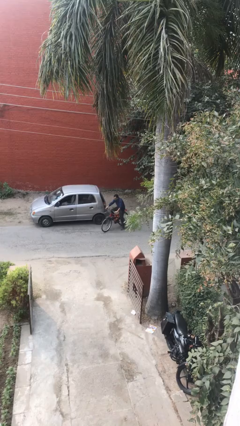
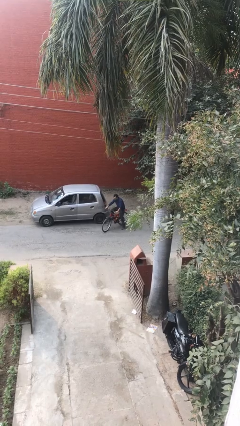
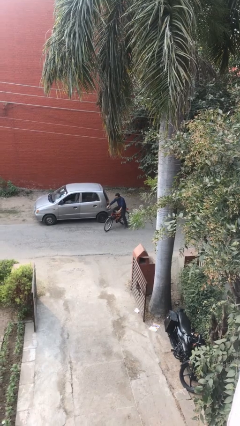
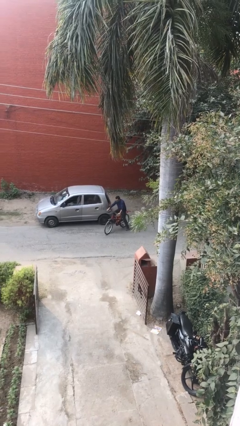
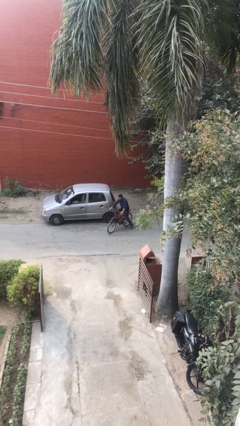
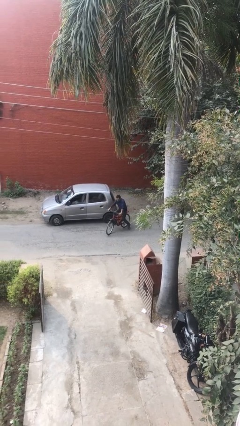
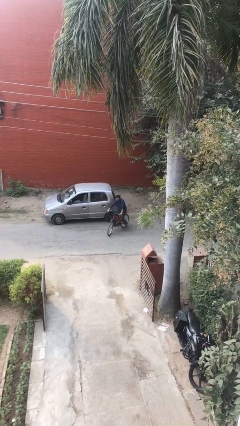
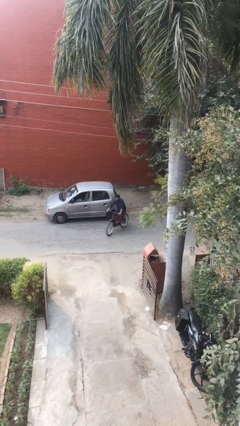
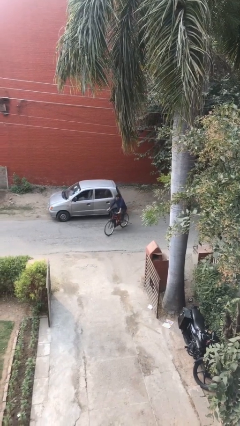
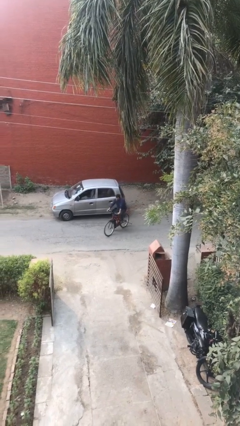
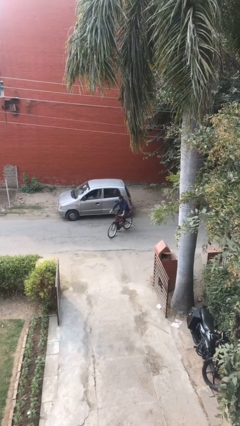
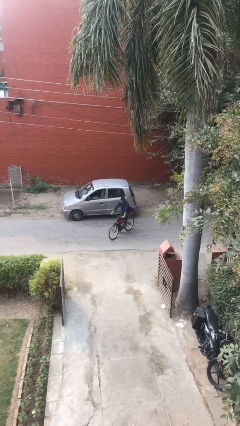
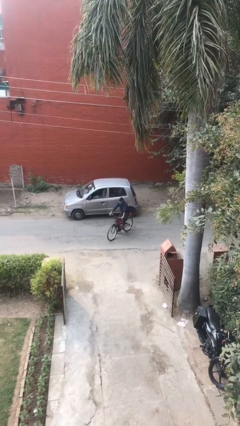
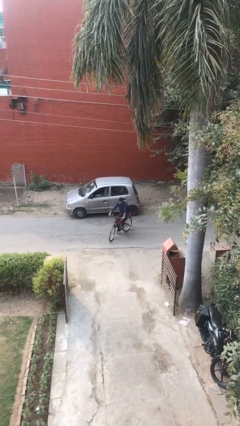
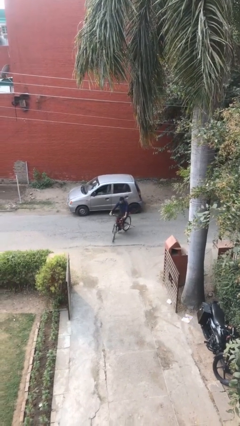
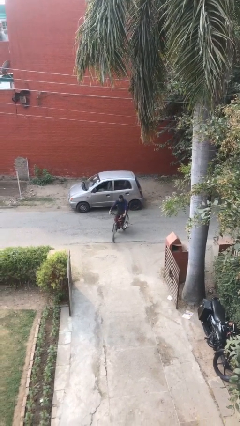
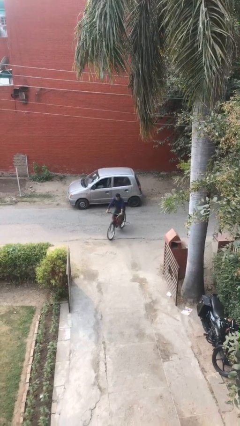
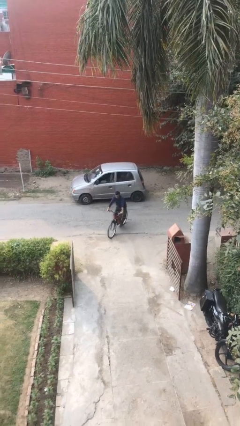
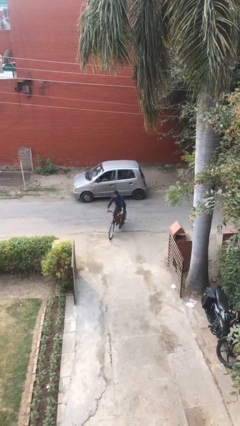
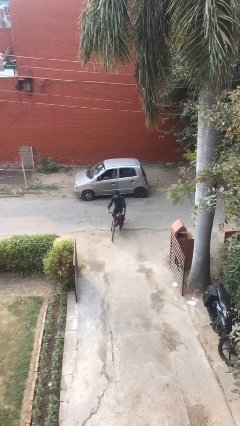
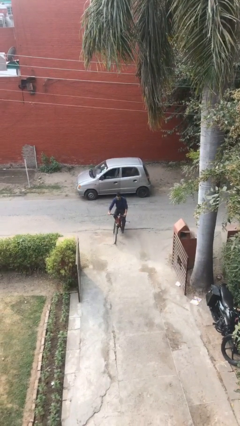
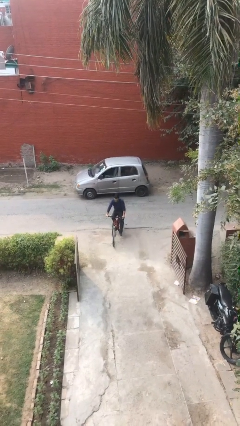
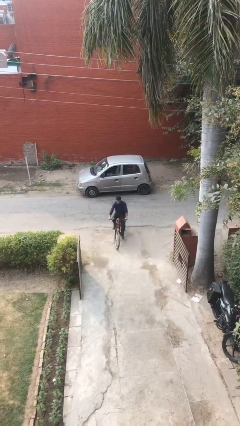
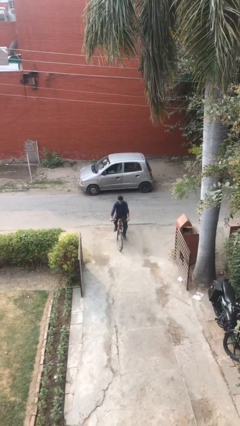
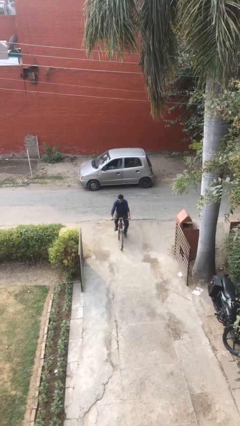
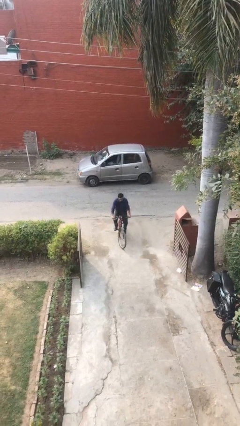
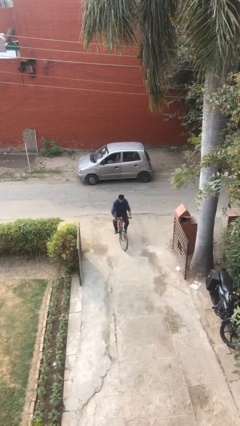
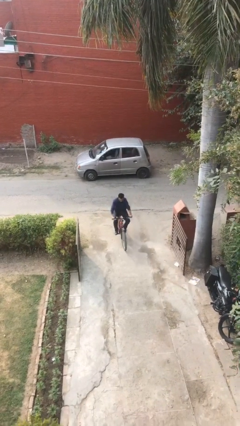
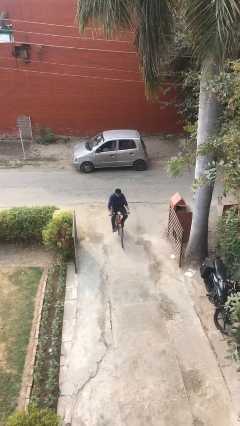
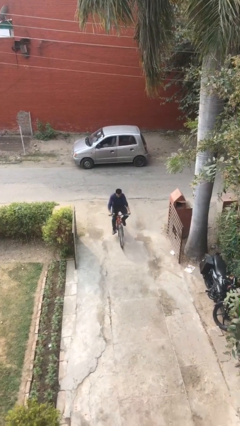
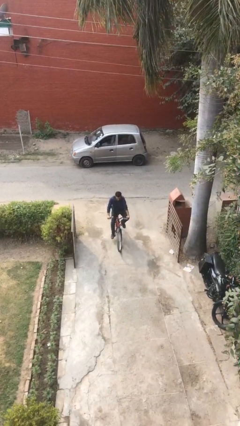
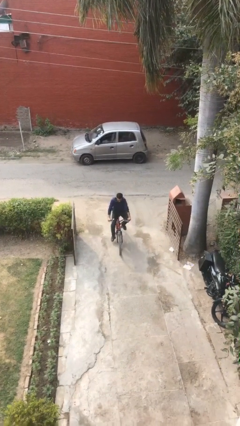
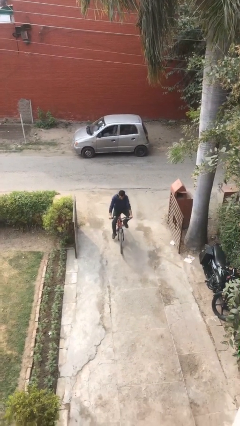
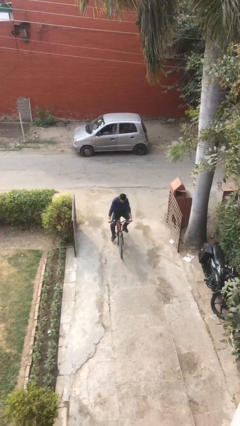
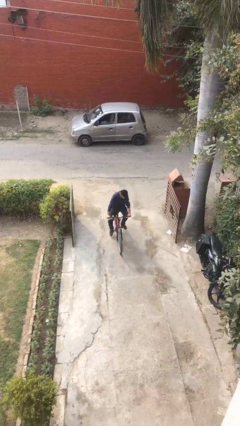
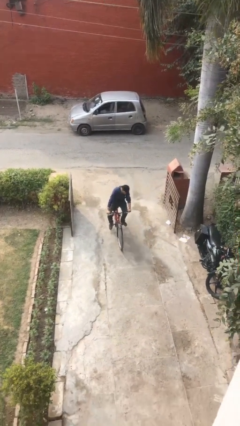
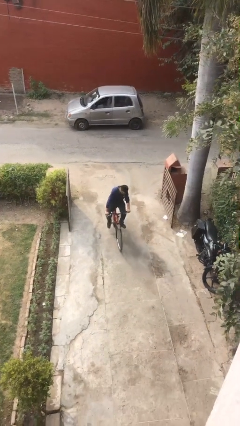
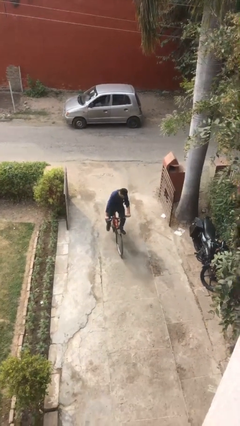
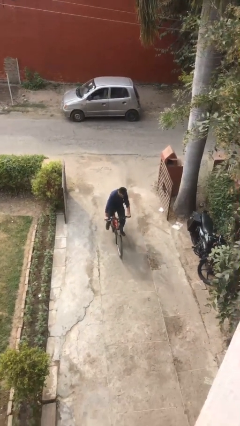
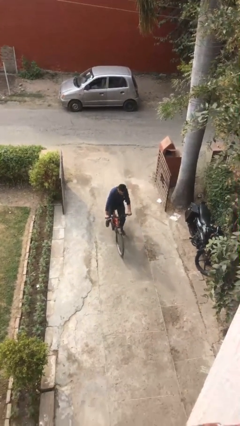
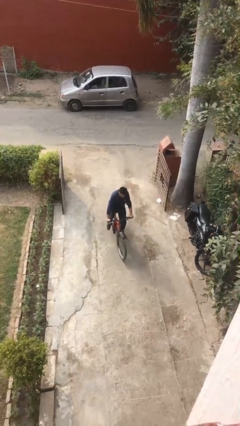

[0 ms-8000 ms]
person rides bicycle

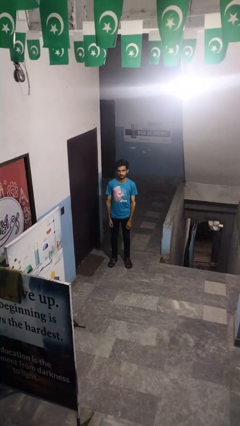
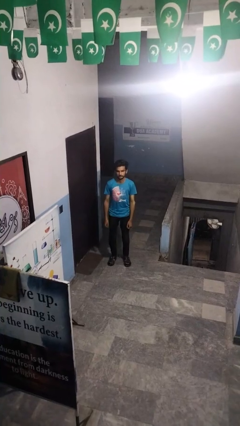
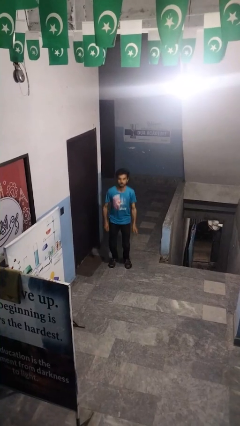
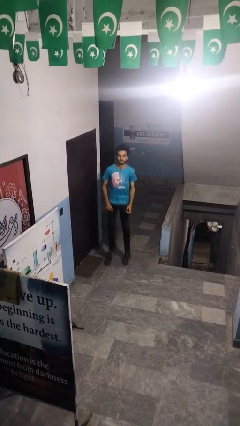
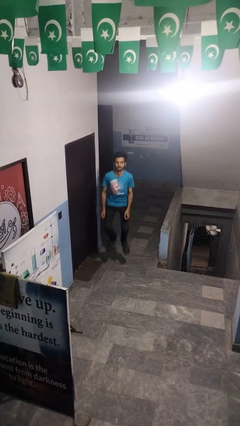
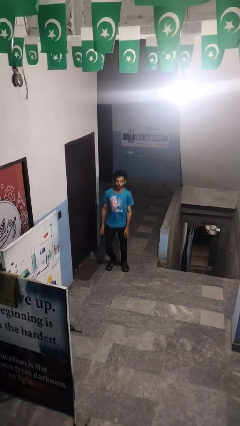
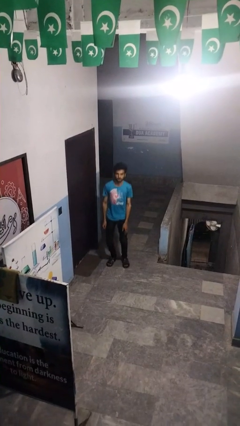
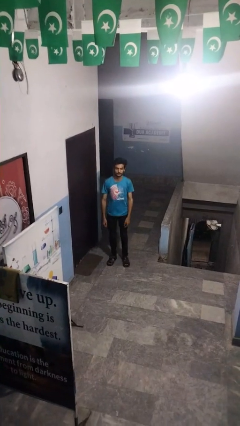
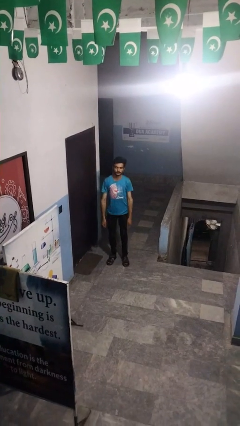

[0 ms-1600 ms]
person jumps

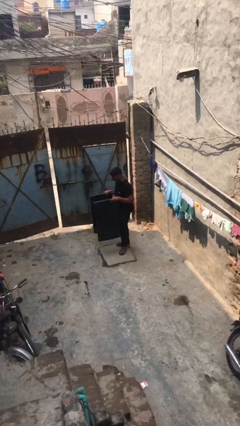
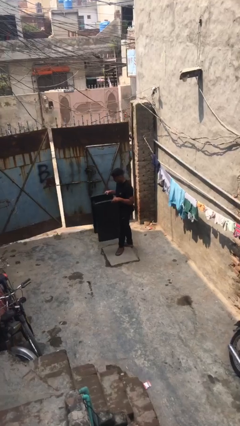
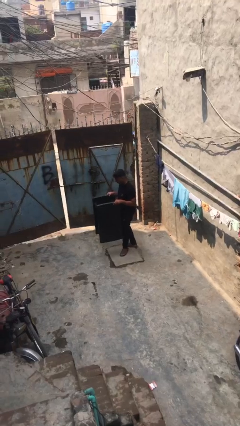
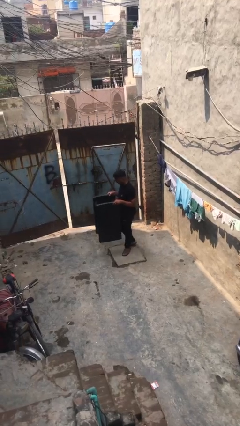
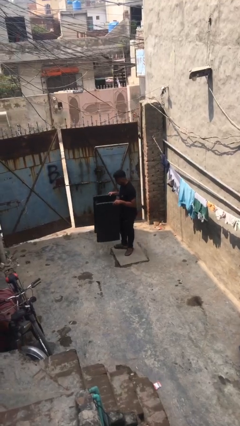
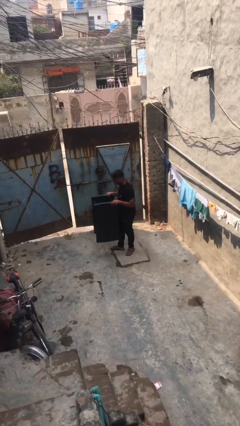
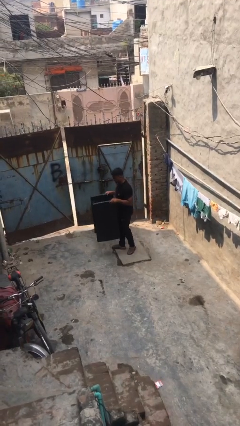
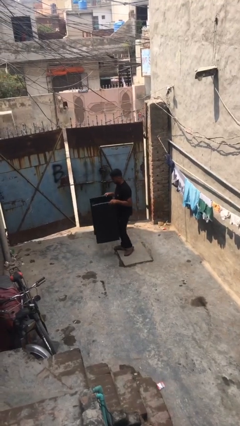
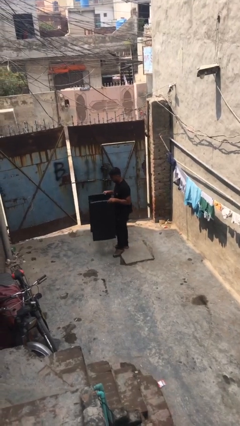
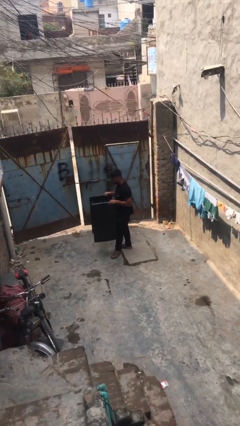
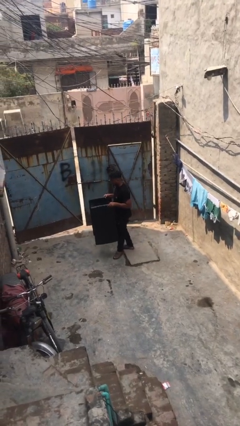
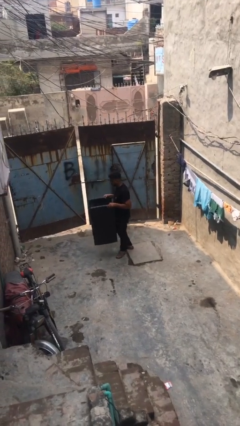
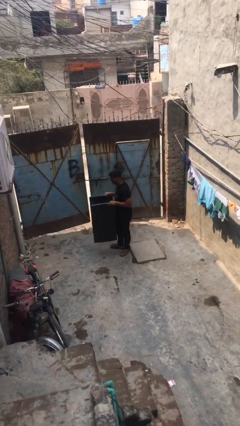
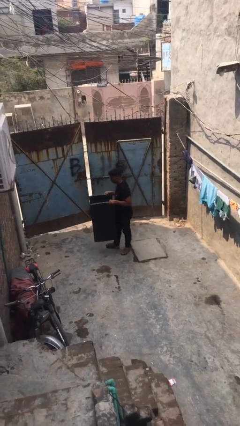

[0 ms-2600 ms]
person carries heavy object

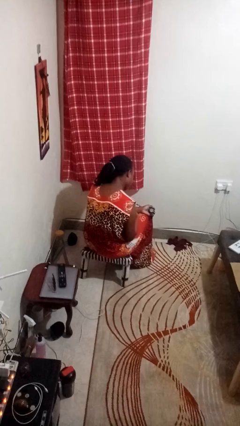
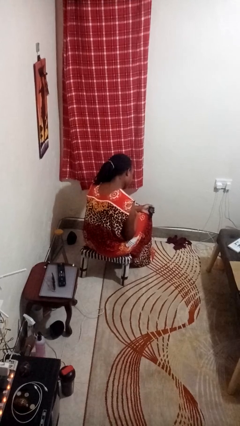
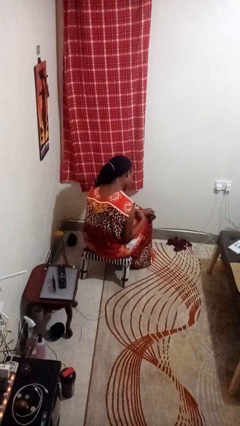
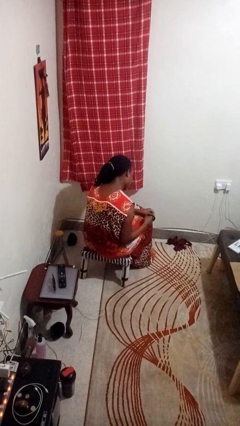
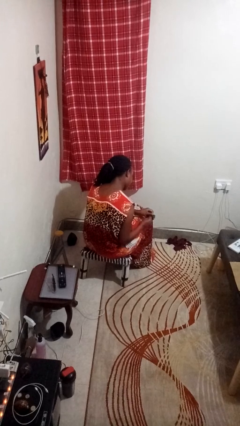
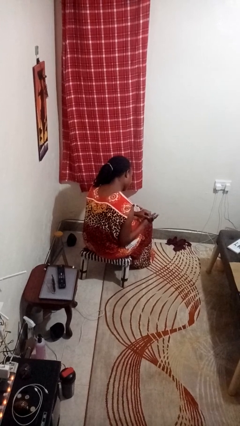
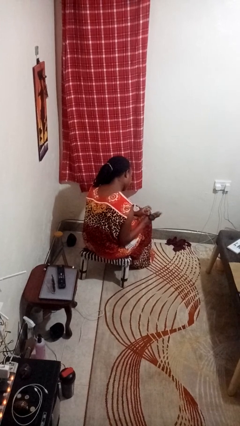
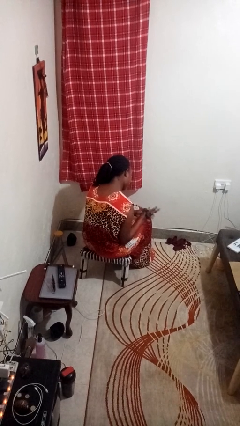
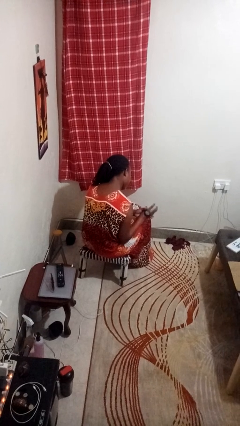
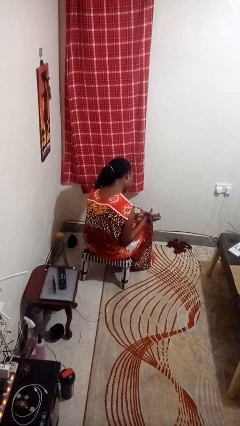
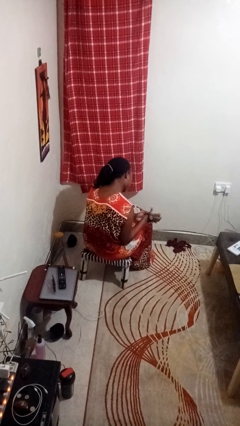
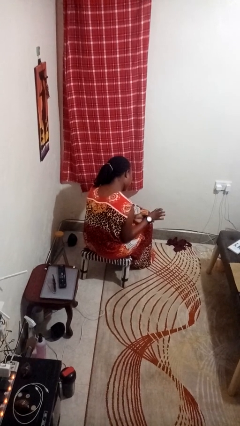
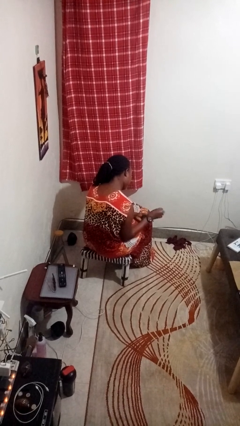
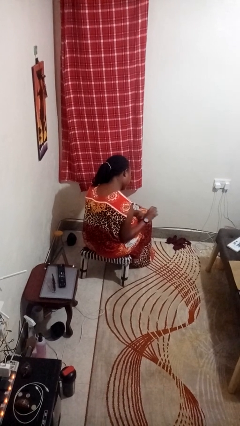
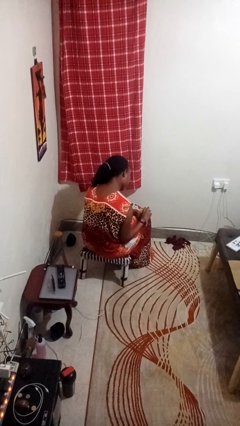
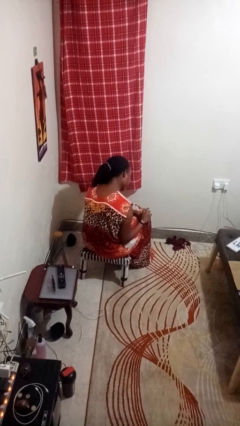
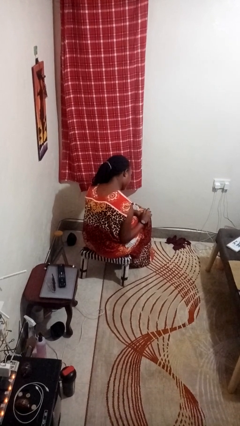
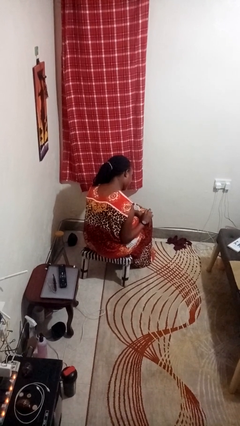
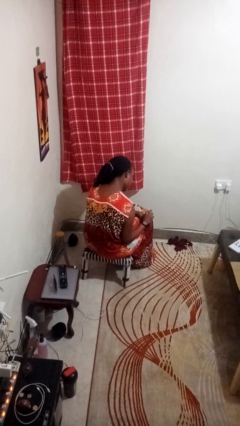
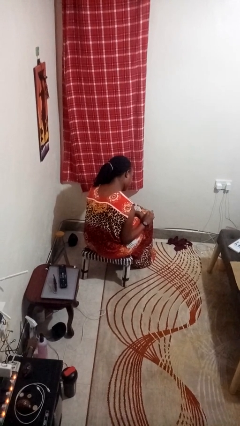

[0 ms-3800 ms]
person puts on wristwatch

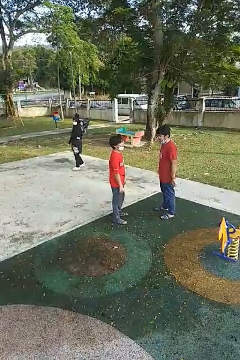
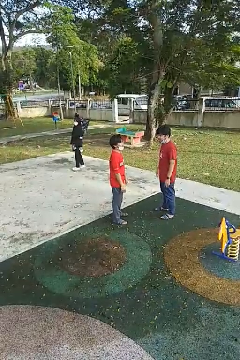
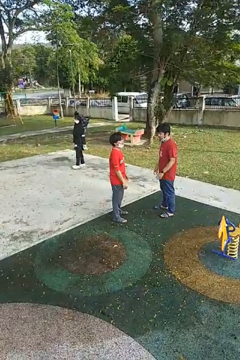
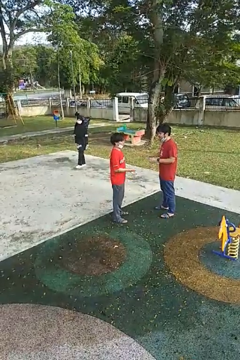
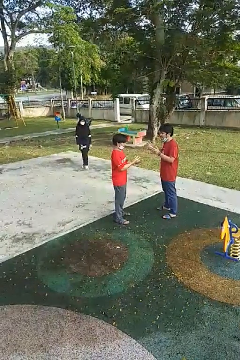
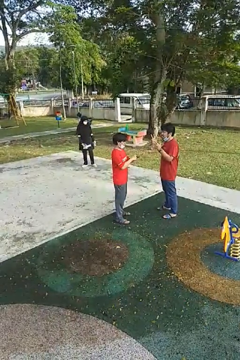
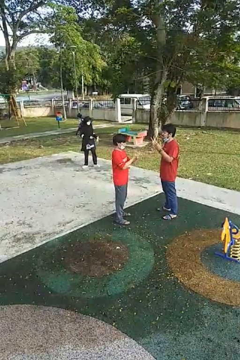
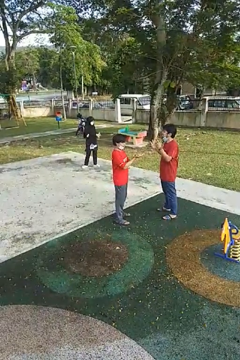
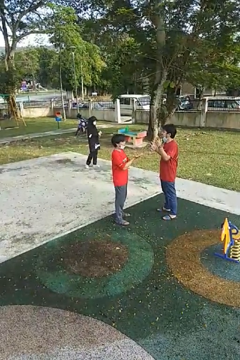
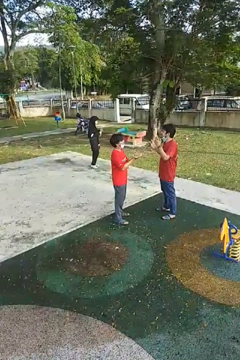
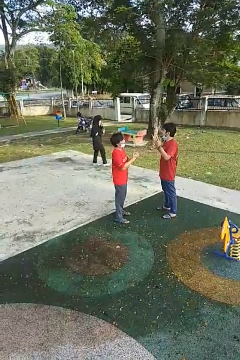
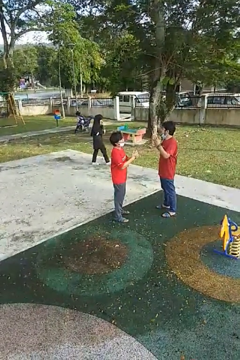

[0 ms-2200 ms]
person talks to person
